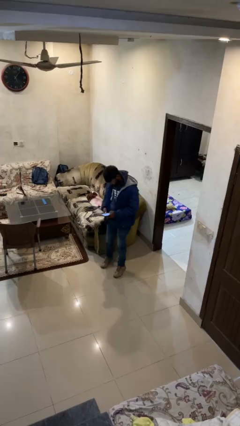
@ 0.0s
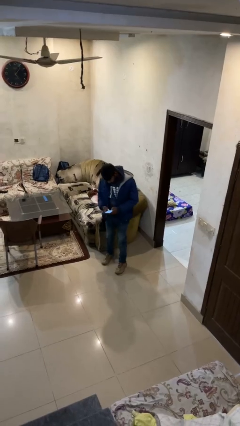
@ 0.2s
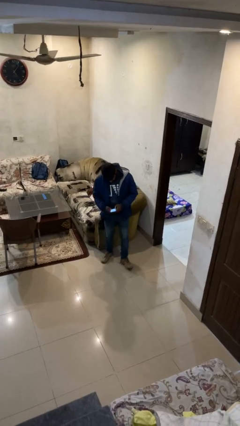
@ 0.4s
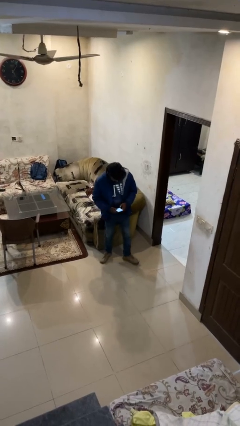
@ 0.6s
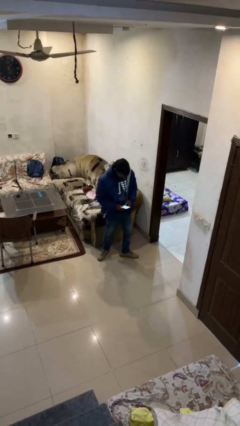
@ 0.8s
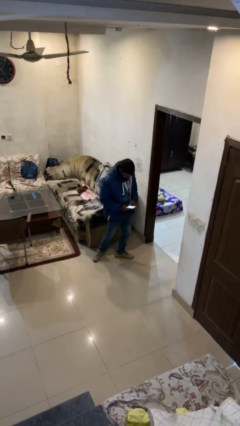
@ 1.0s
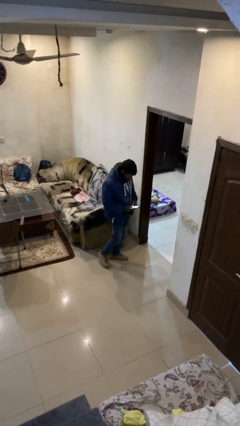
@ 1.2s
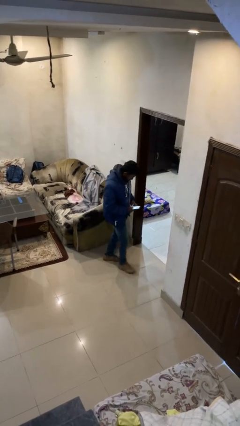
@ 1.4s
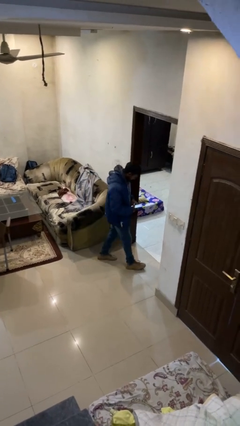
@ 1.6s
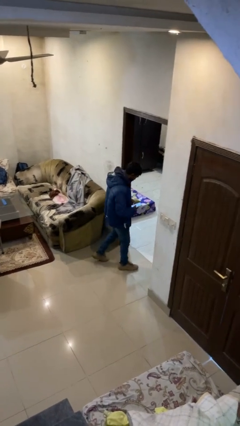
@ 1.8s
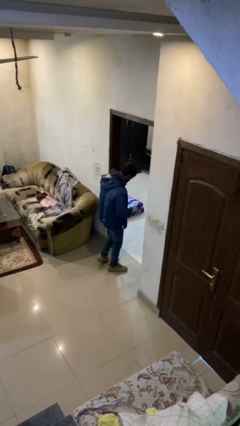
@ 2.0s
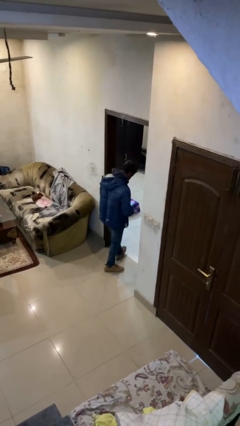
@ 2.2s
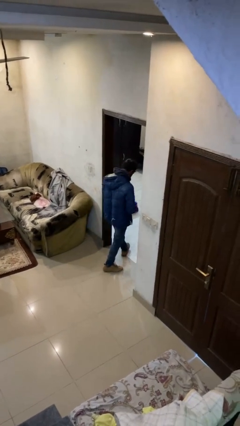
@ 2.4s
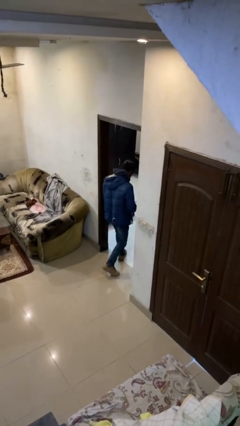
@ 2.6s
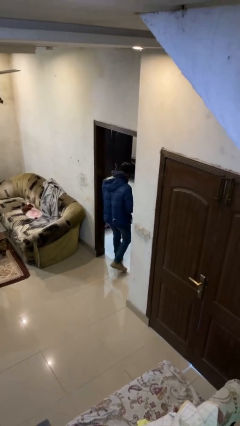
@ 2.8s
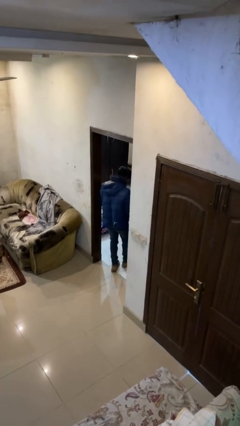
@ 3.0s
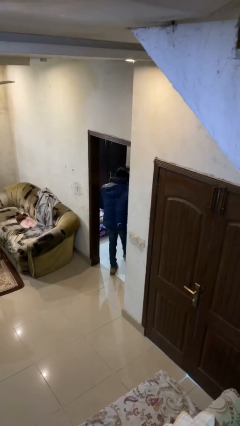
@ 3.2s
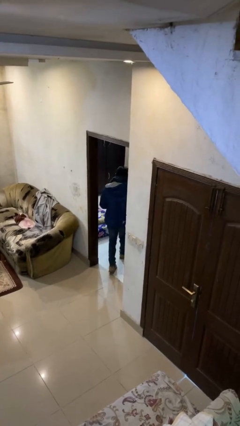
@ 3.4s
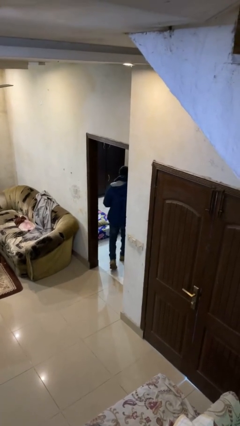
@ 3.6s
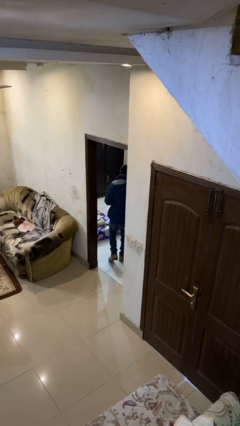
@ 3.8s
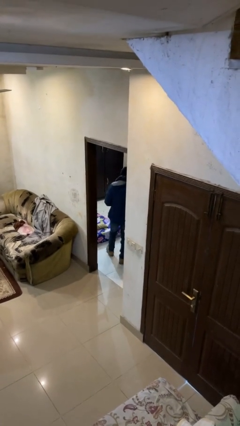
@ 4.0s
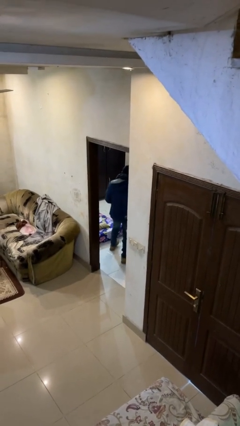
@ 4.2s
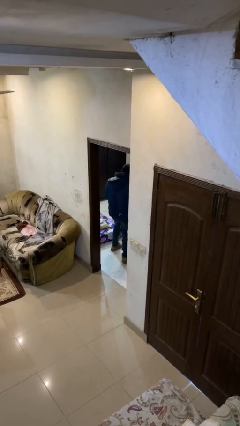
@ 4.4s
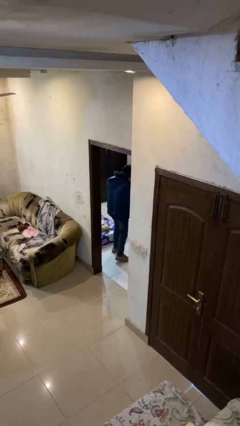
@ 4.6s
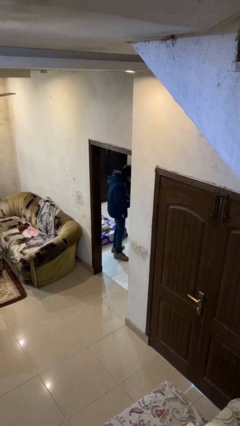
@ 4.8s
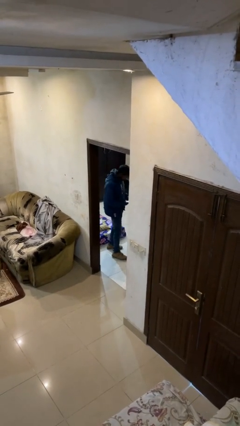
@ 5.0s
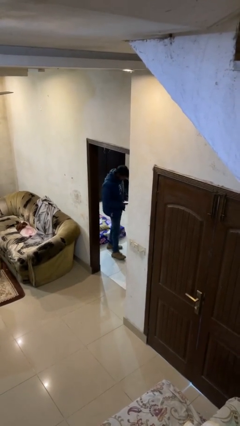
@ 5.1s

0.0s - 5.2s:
person exits scene through structure

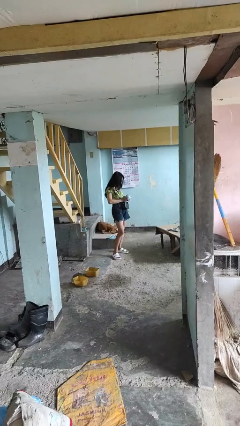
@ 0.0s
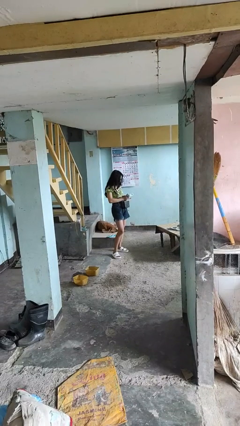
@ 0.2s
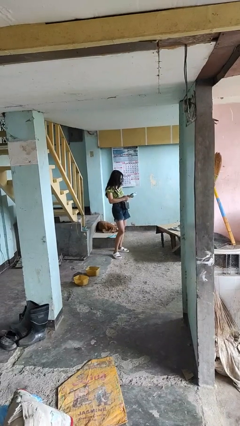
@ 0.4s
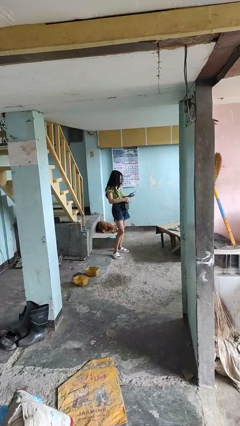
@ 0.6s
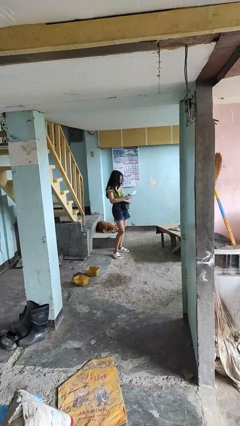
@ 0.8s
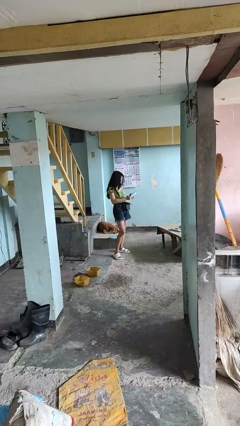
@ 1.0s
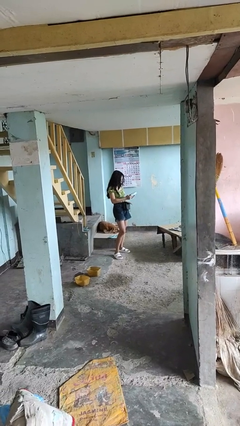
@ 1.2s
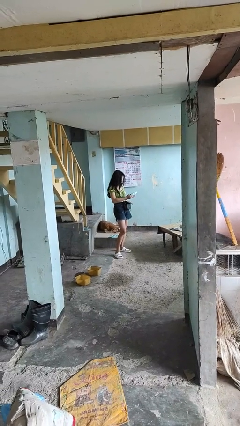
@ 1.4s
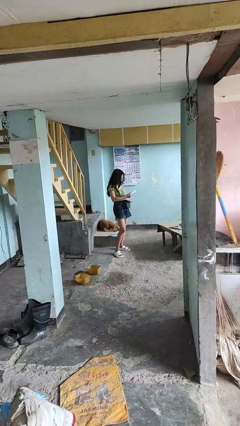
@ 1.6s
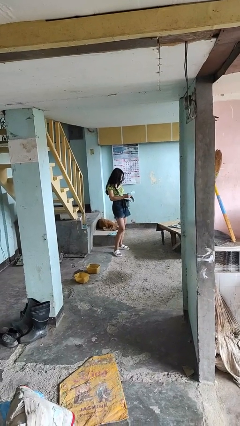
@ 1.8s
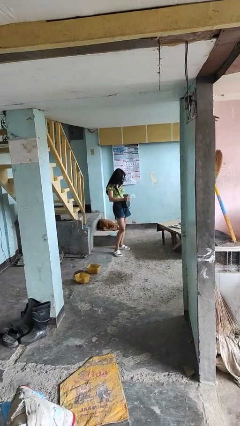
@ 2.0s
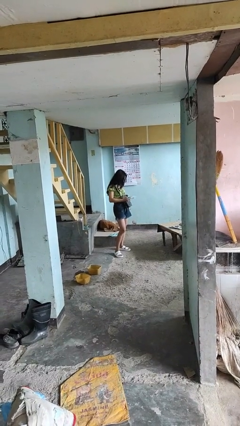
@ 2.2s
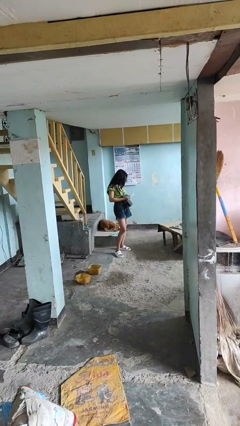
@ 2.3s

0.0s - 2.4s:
person takes object from purse

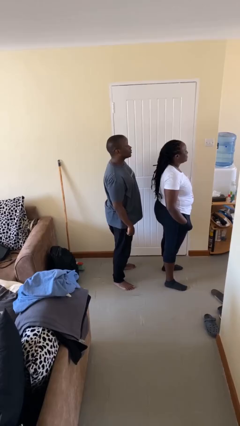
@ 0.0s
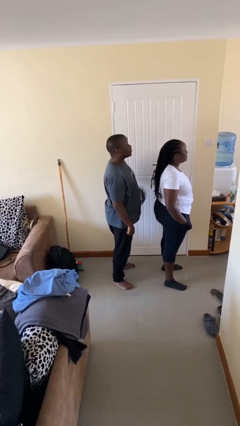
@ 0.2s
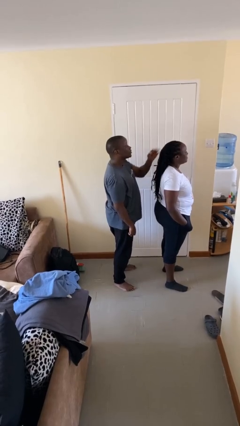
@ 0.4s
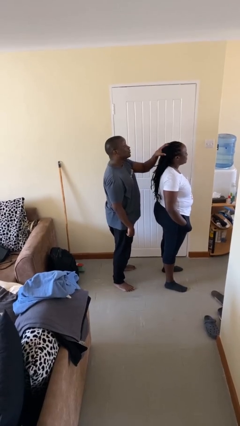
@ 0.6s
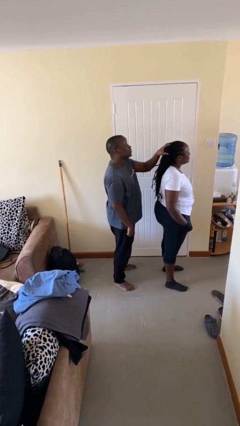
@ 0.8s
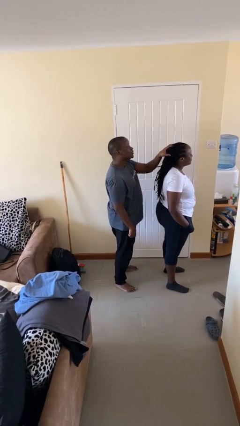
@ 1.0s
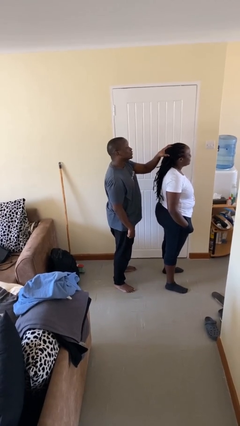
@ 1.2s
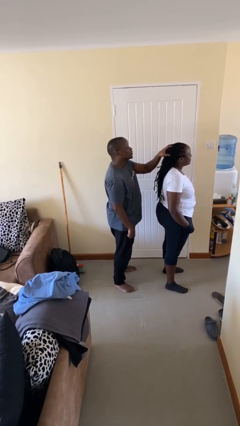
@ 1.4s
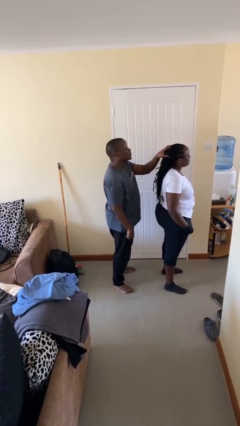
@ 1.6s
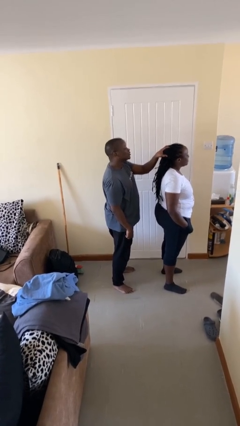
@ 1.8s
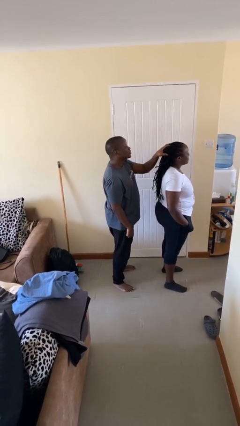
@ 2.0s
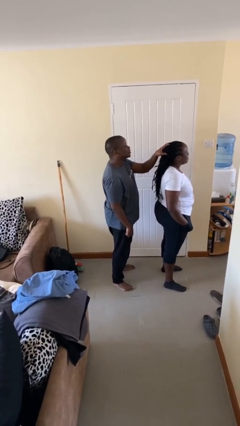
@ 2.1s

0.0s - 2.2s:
person grabs person by hair

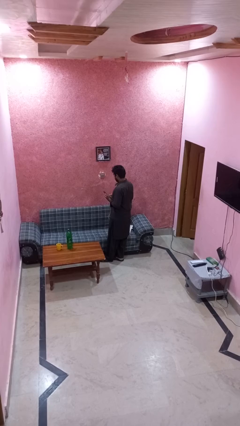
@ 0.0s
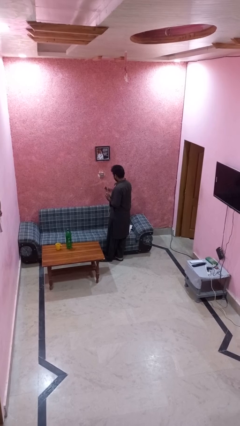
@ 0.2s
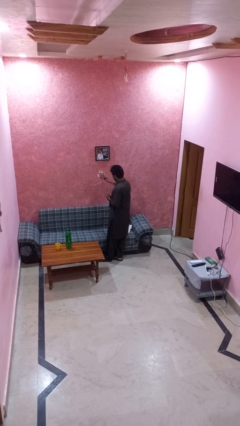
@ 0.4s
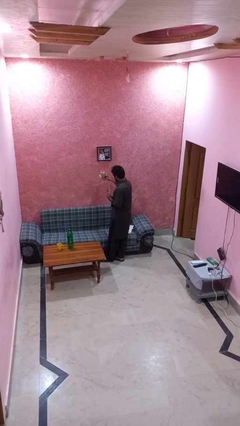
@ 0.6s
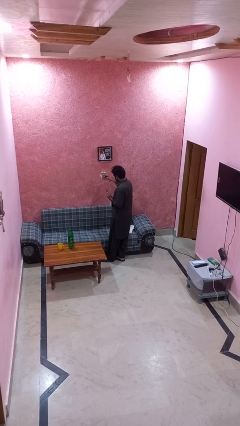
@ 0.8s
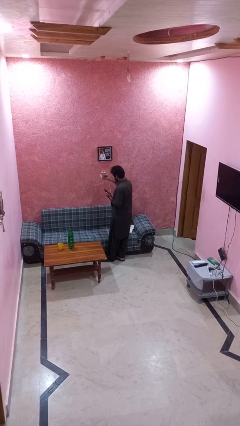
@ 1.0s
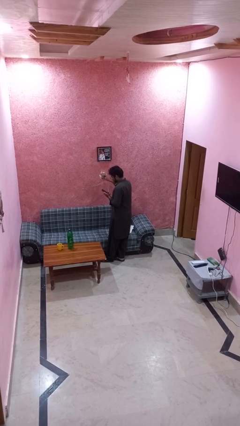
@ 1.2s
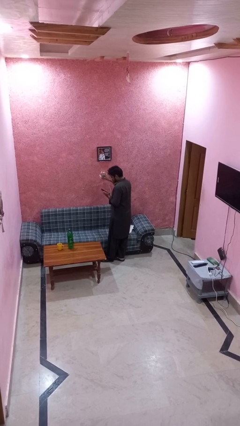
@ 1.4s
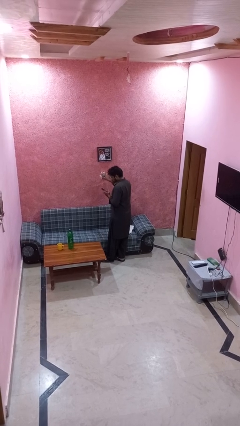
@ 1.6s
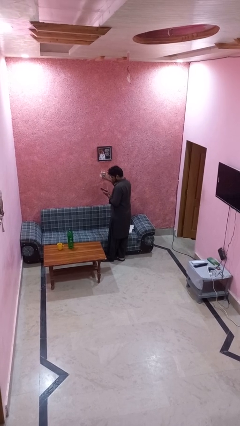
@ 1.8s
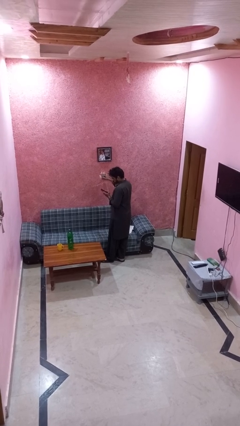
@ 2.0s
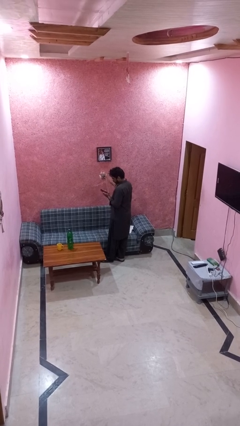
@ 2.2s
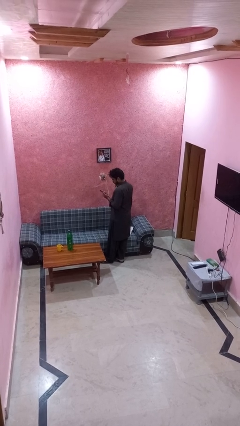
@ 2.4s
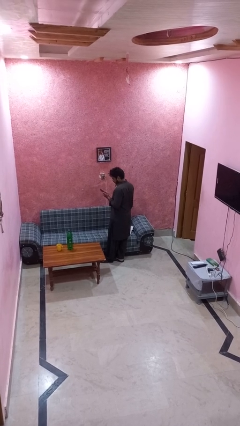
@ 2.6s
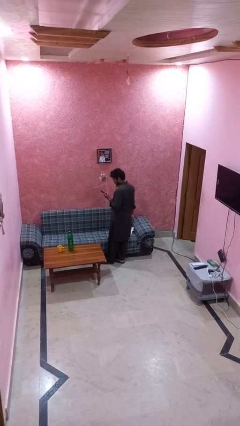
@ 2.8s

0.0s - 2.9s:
person plugs into electrical socket

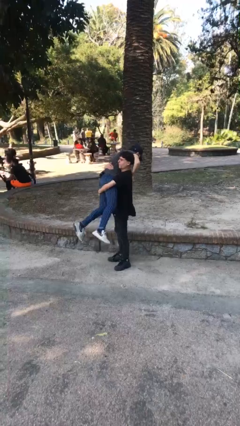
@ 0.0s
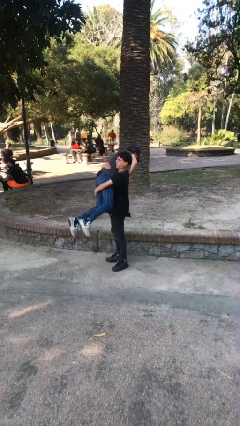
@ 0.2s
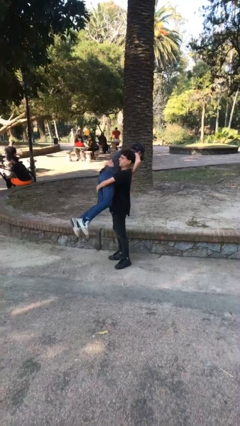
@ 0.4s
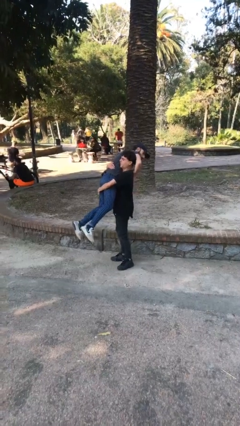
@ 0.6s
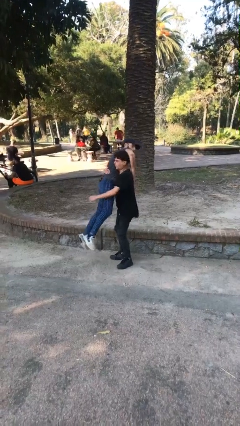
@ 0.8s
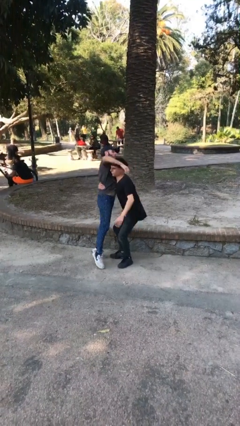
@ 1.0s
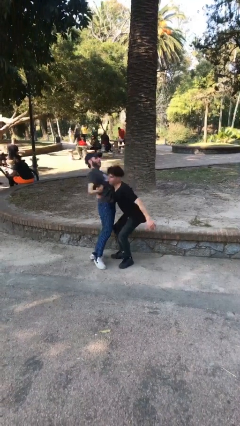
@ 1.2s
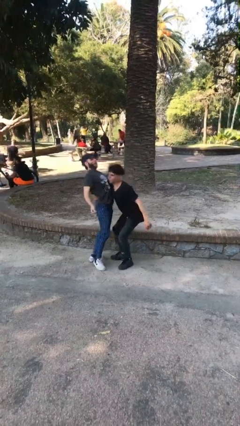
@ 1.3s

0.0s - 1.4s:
person puts down person

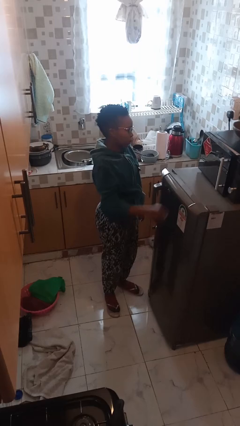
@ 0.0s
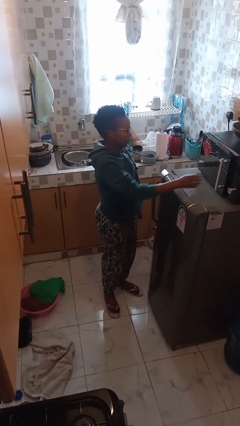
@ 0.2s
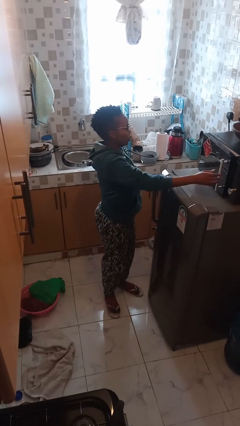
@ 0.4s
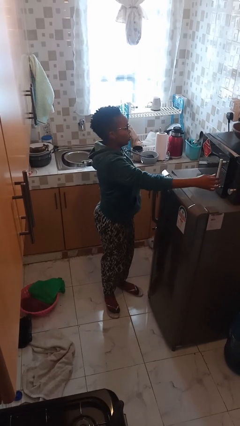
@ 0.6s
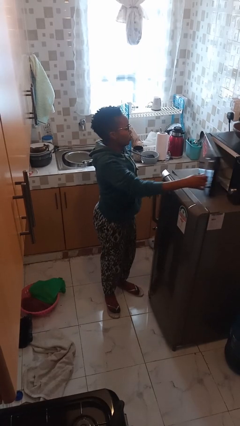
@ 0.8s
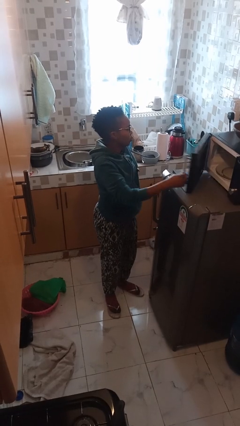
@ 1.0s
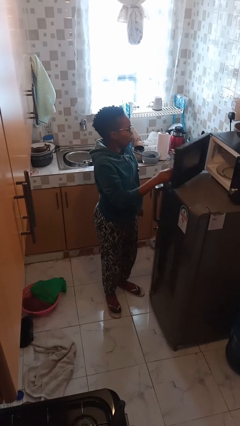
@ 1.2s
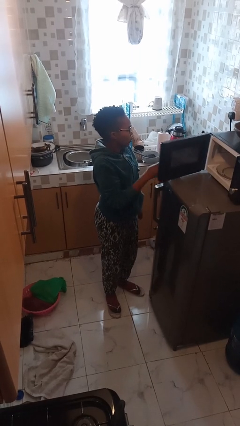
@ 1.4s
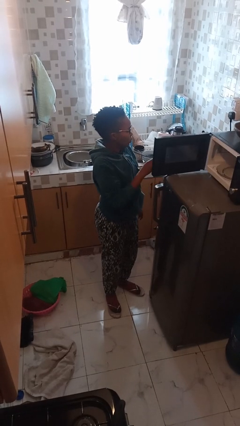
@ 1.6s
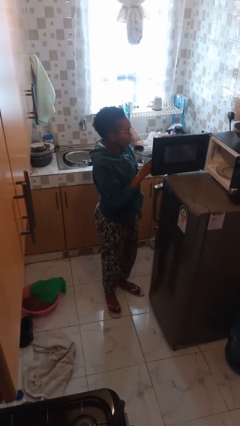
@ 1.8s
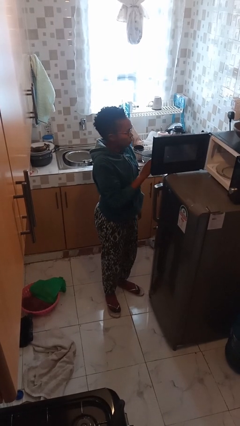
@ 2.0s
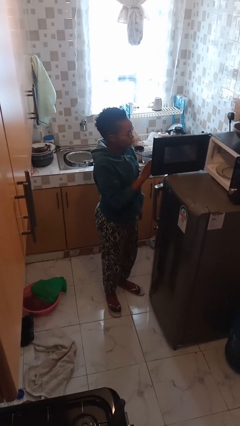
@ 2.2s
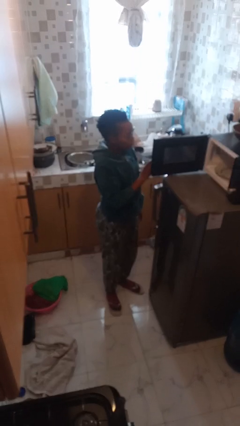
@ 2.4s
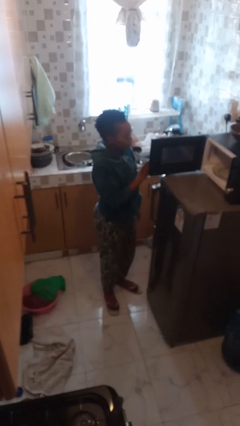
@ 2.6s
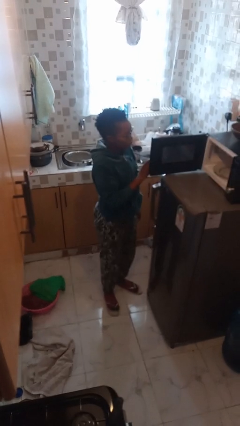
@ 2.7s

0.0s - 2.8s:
person opens microwave

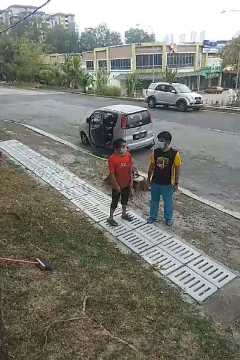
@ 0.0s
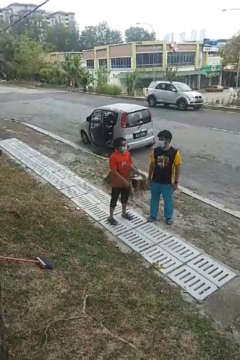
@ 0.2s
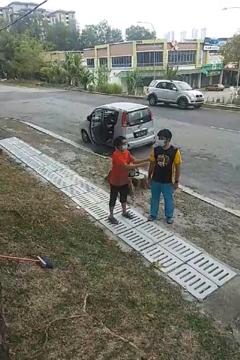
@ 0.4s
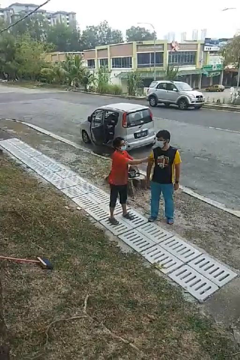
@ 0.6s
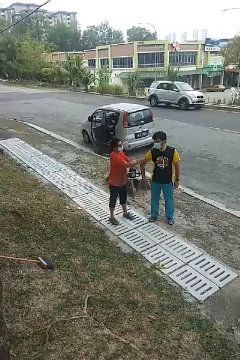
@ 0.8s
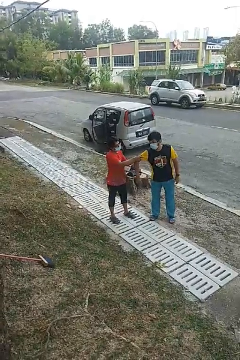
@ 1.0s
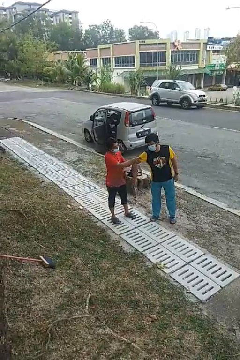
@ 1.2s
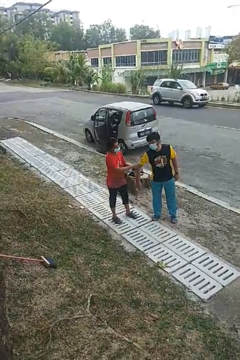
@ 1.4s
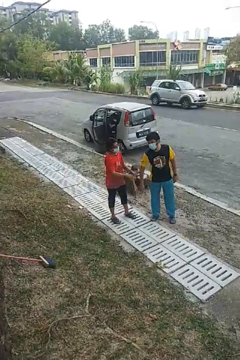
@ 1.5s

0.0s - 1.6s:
person grabs person by bicep
